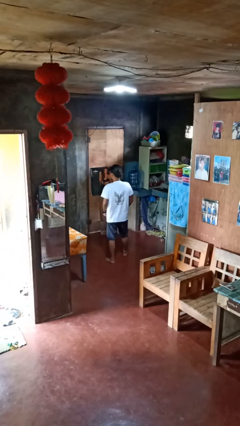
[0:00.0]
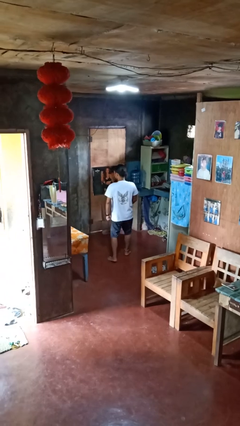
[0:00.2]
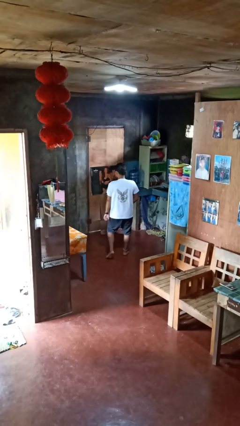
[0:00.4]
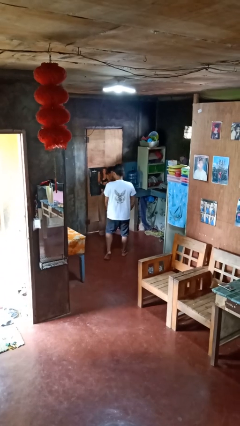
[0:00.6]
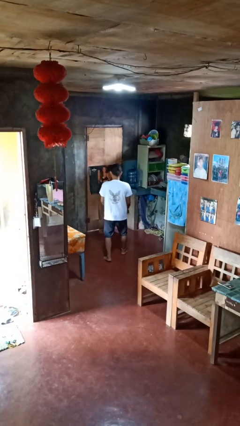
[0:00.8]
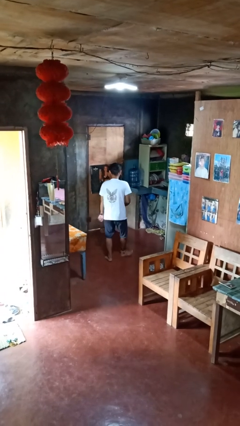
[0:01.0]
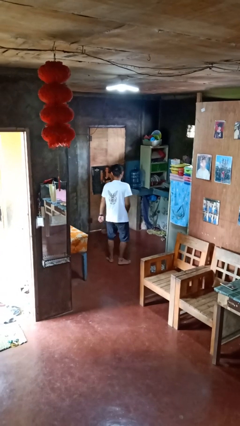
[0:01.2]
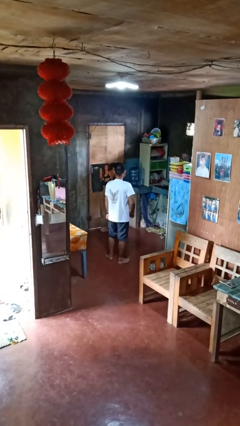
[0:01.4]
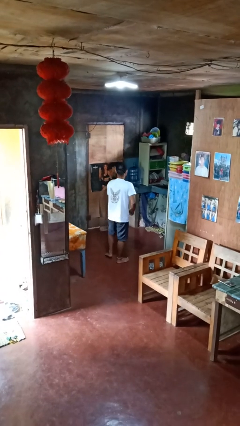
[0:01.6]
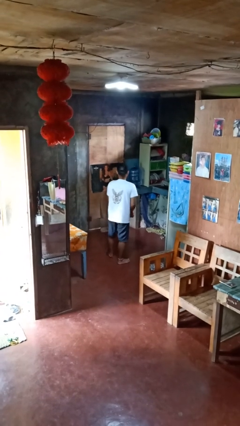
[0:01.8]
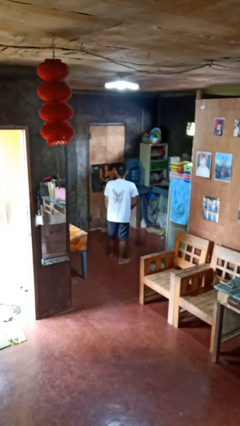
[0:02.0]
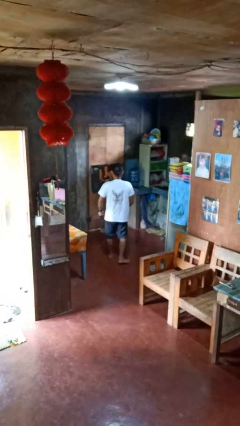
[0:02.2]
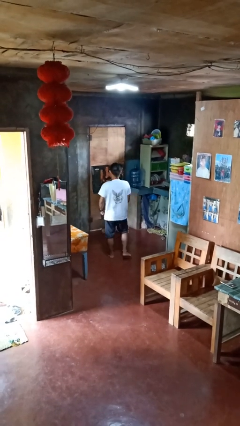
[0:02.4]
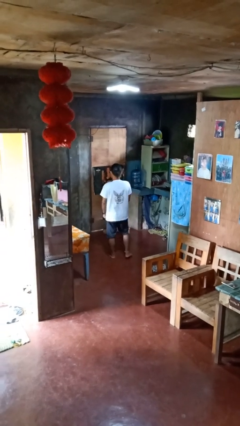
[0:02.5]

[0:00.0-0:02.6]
person dances in place

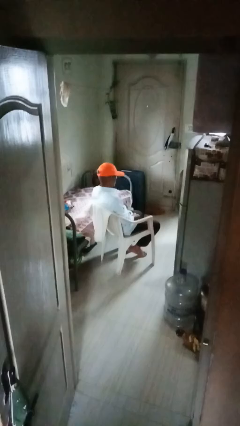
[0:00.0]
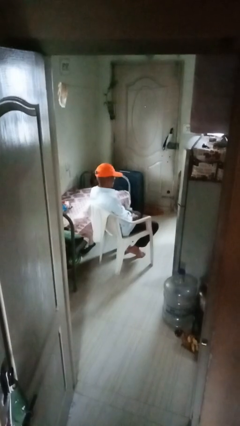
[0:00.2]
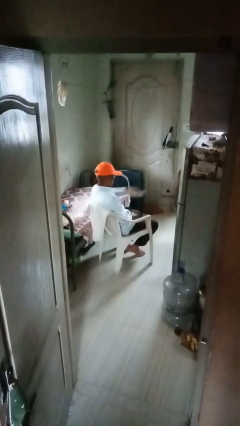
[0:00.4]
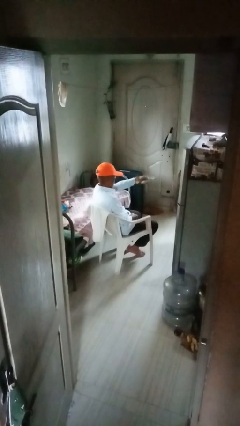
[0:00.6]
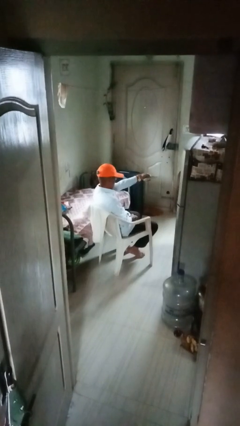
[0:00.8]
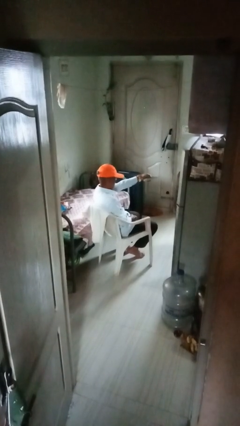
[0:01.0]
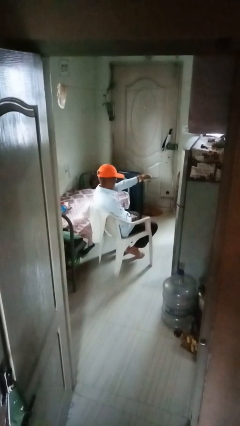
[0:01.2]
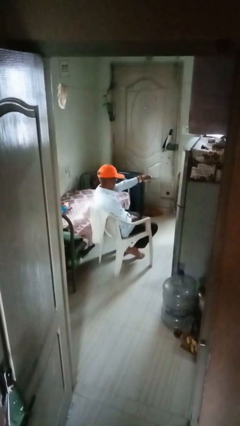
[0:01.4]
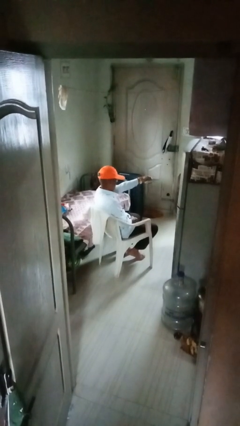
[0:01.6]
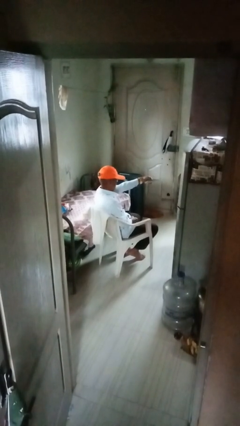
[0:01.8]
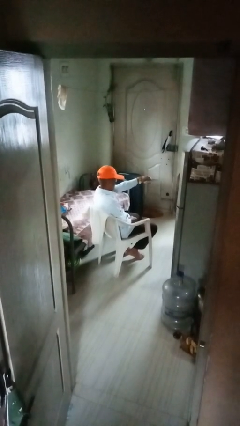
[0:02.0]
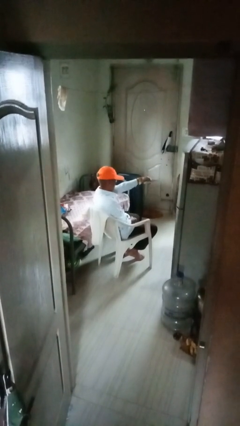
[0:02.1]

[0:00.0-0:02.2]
person uses television remote

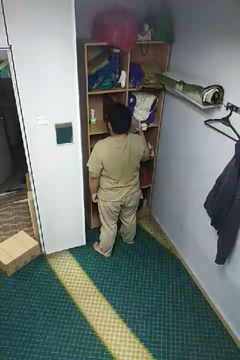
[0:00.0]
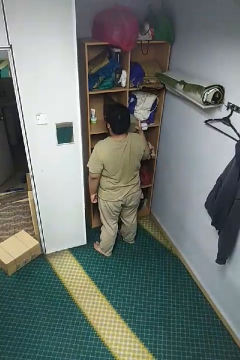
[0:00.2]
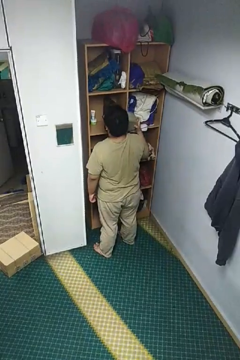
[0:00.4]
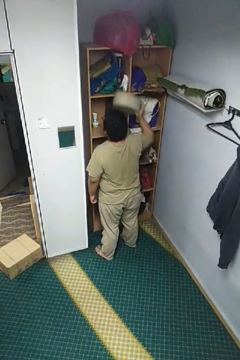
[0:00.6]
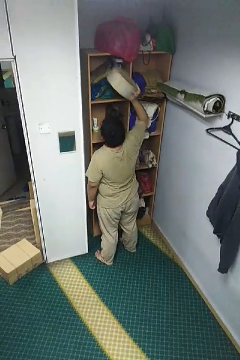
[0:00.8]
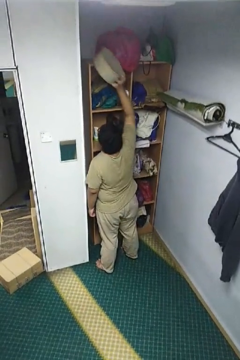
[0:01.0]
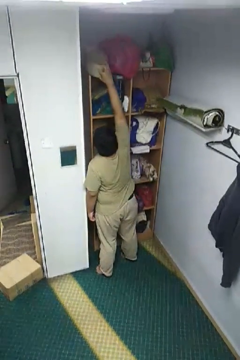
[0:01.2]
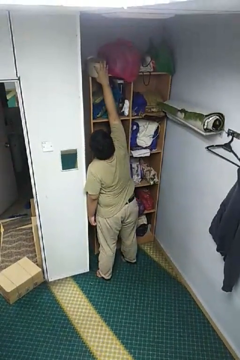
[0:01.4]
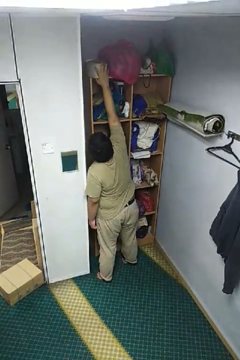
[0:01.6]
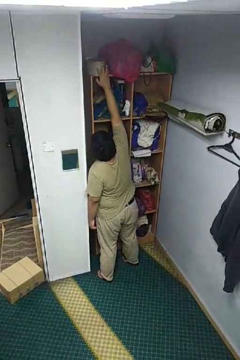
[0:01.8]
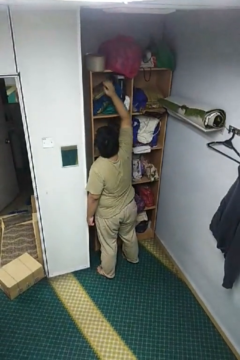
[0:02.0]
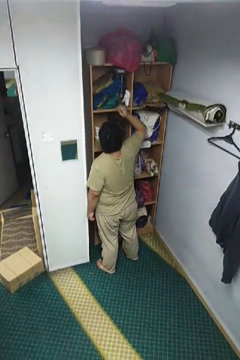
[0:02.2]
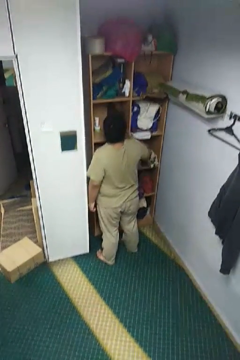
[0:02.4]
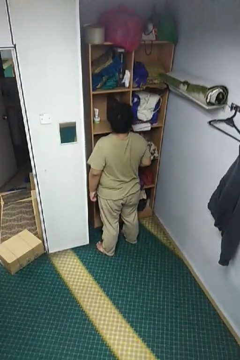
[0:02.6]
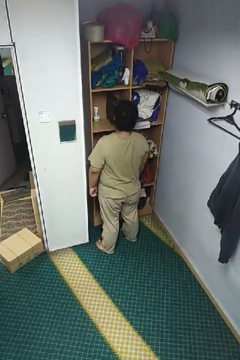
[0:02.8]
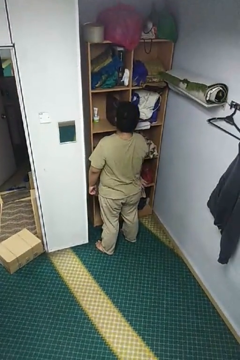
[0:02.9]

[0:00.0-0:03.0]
person puts down object on shelf

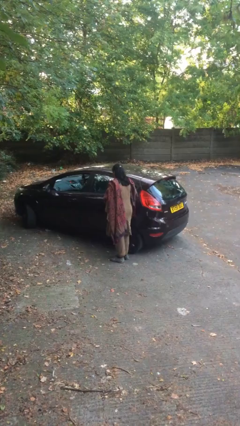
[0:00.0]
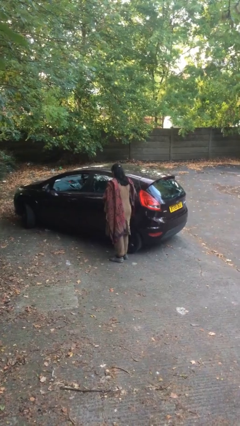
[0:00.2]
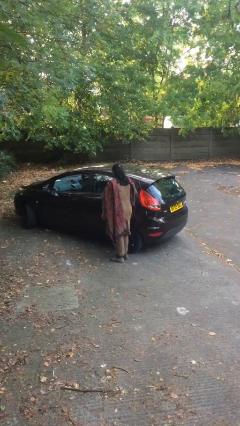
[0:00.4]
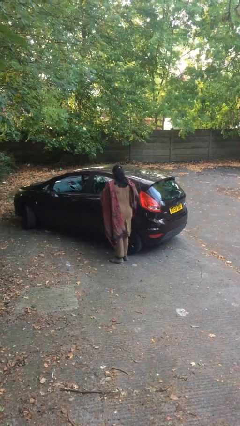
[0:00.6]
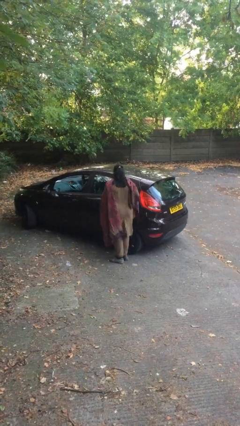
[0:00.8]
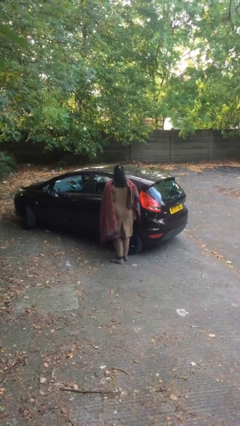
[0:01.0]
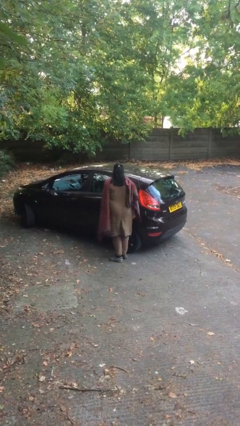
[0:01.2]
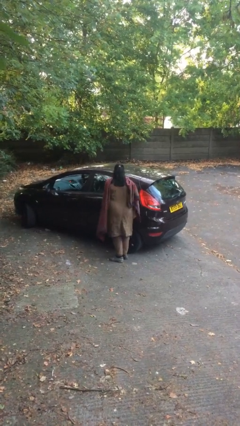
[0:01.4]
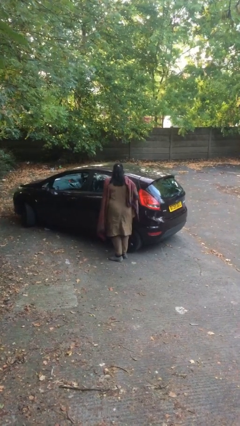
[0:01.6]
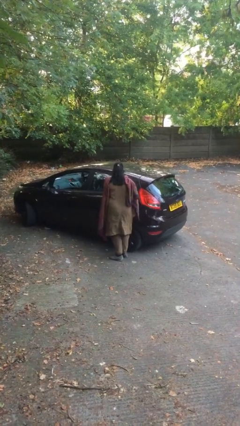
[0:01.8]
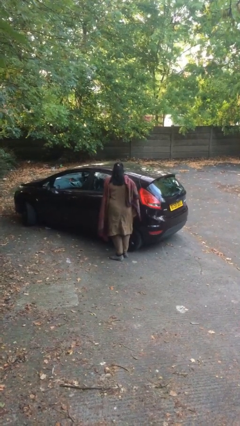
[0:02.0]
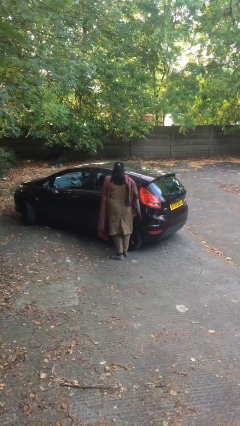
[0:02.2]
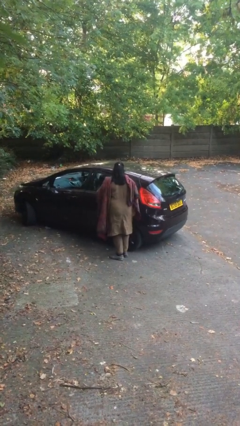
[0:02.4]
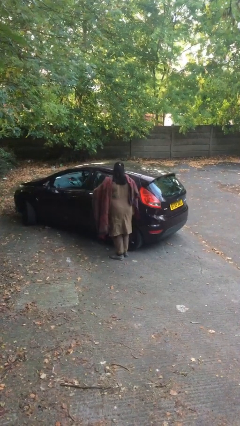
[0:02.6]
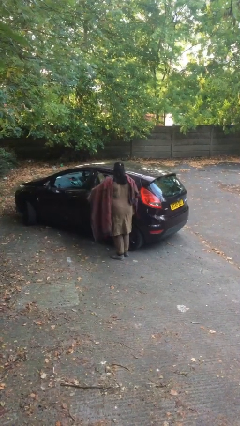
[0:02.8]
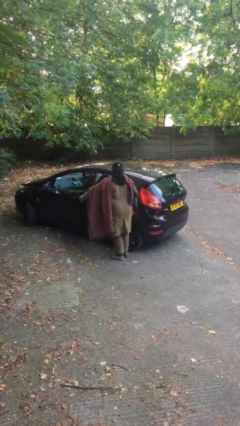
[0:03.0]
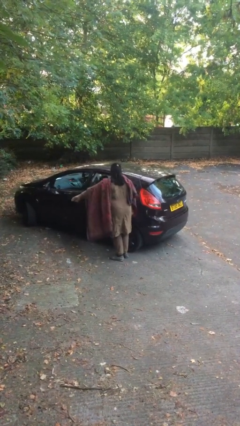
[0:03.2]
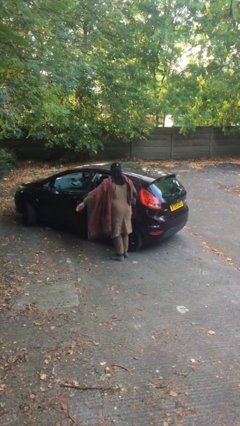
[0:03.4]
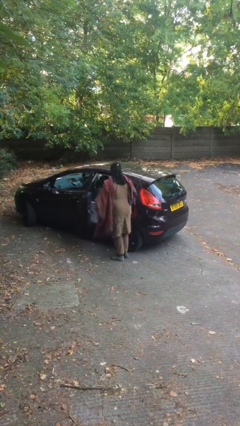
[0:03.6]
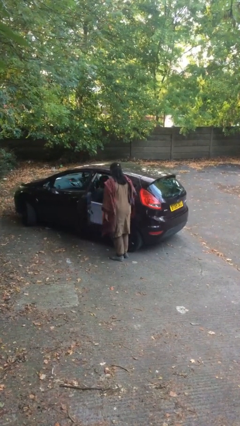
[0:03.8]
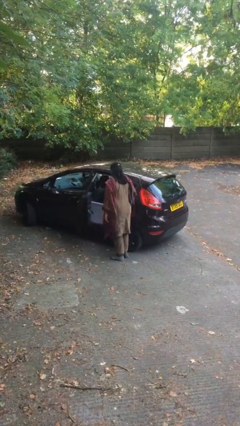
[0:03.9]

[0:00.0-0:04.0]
person opens car door

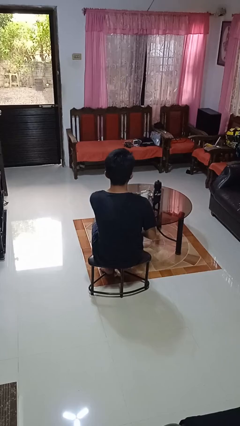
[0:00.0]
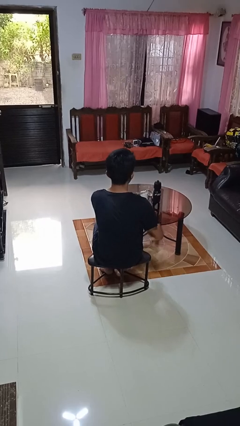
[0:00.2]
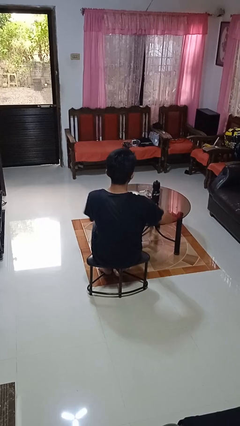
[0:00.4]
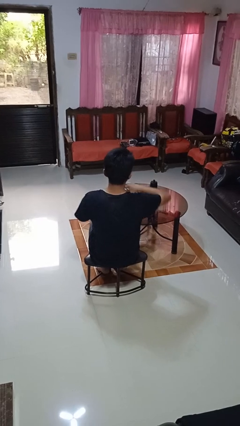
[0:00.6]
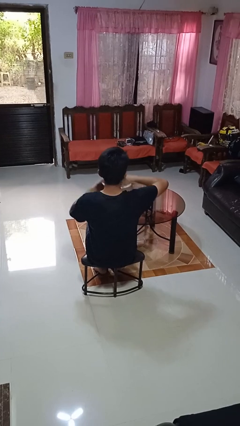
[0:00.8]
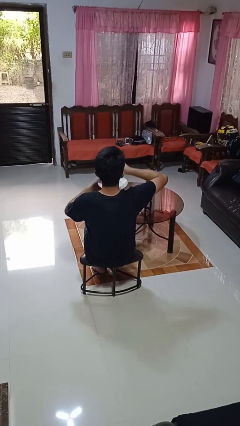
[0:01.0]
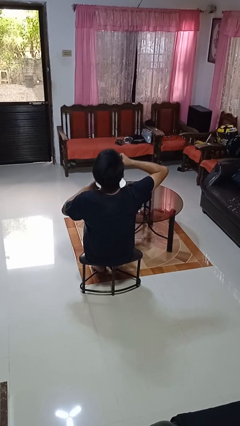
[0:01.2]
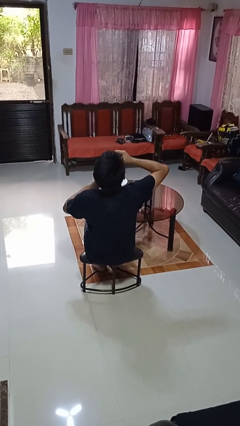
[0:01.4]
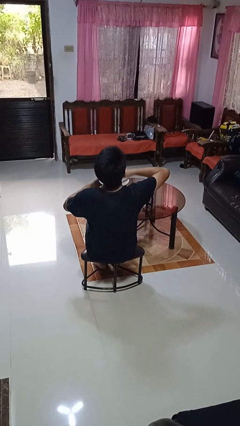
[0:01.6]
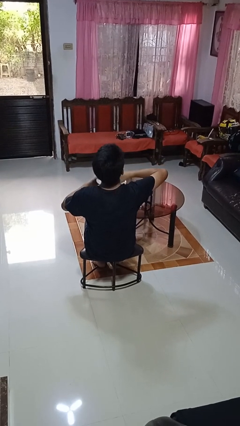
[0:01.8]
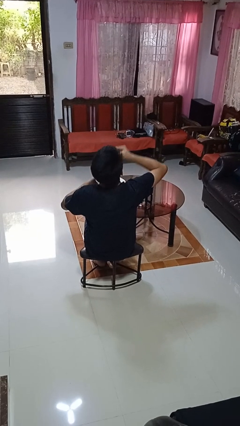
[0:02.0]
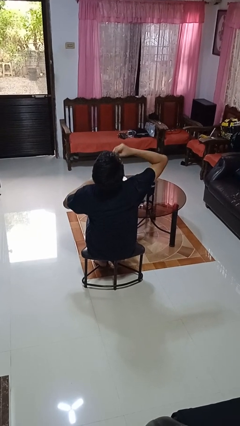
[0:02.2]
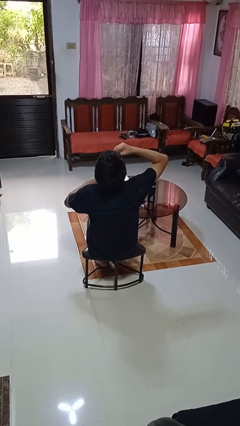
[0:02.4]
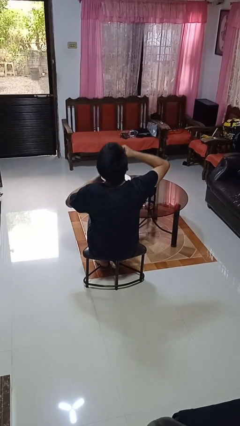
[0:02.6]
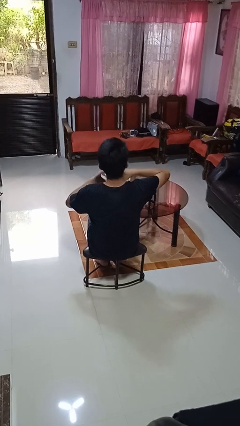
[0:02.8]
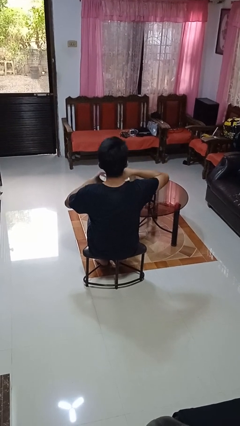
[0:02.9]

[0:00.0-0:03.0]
person eats with hands

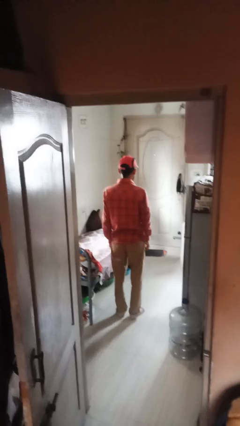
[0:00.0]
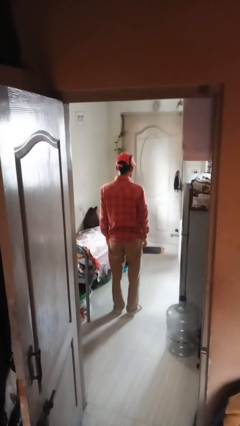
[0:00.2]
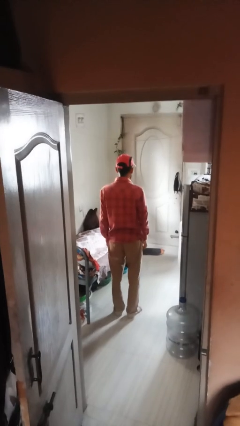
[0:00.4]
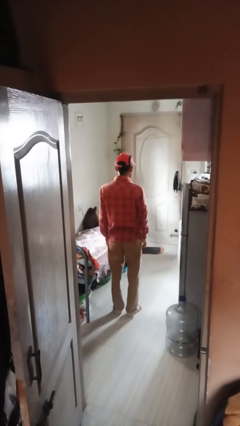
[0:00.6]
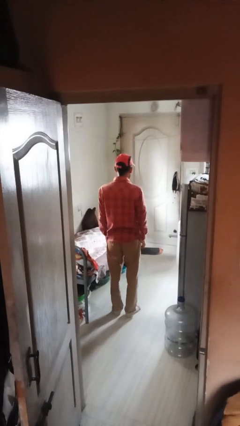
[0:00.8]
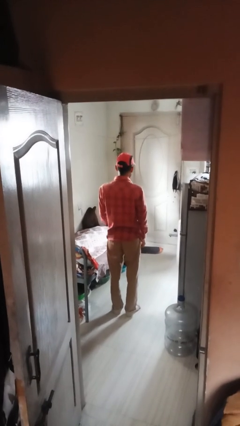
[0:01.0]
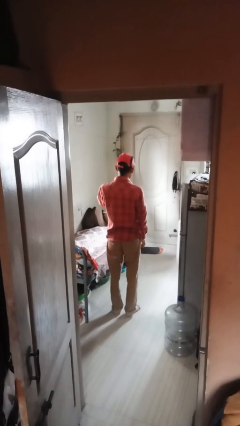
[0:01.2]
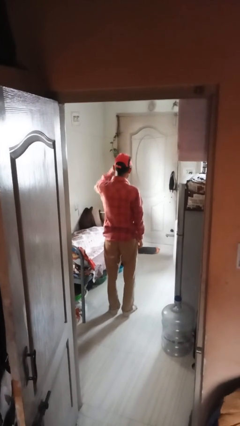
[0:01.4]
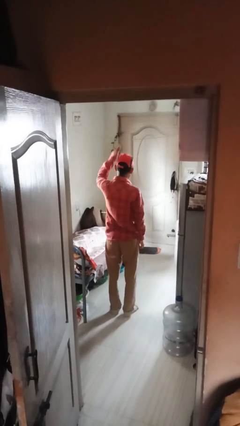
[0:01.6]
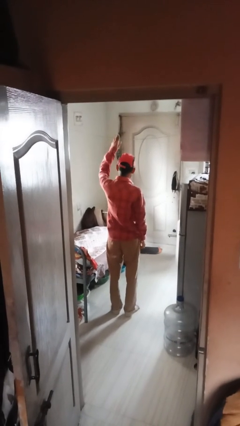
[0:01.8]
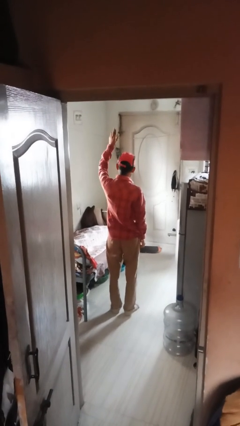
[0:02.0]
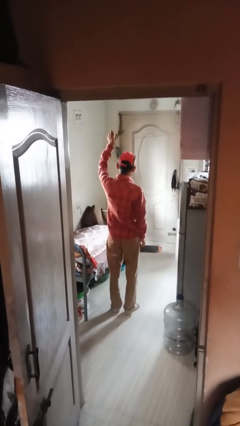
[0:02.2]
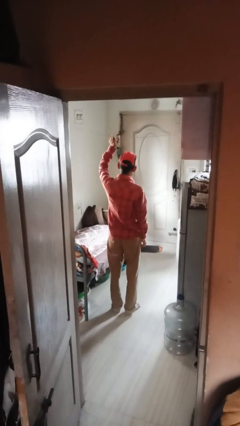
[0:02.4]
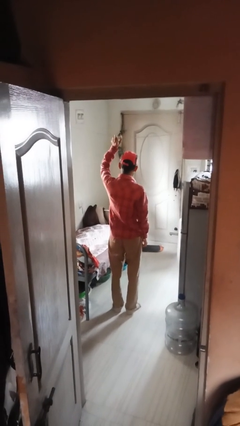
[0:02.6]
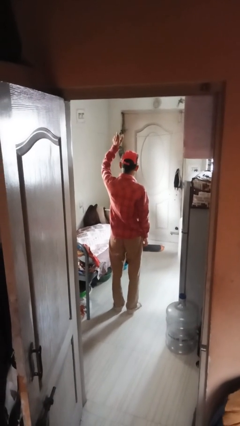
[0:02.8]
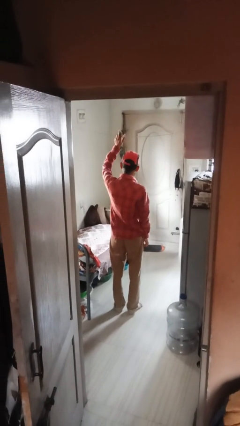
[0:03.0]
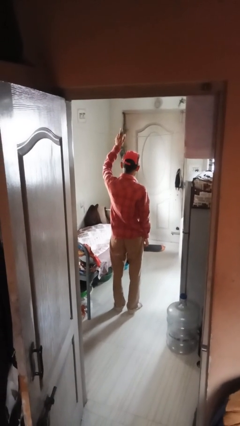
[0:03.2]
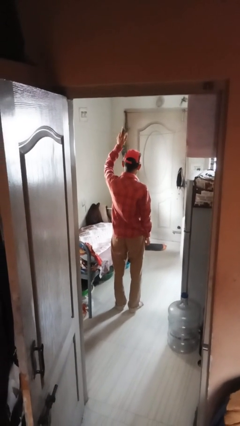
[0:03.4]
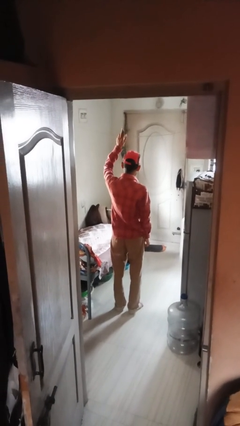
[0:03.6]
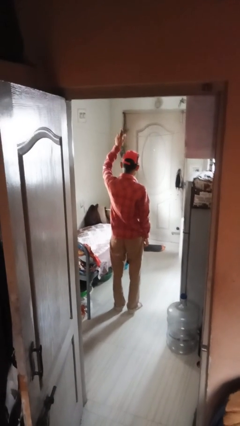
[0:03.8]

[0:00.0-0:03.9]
person gestures swipe up
